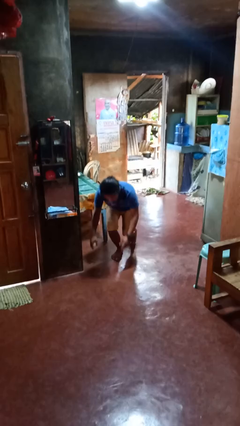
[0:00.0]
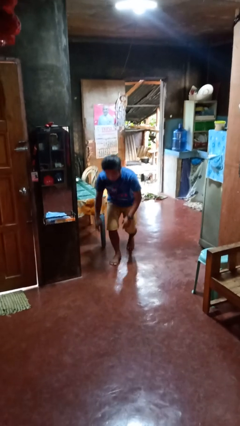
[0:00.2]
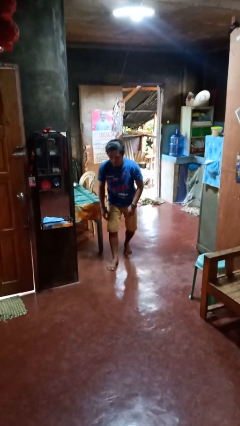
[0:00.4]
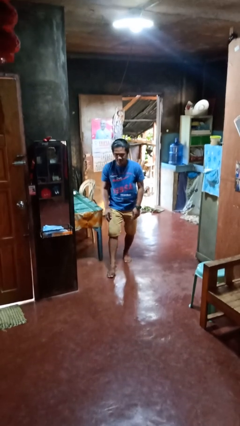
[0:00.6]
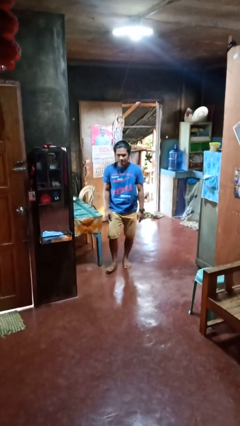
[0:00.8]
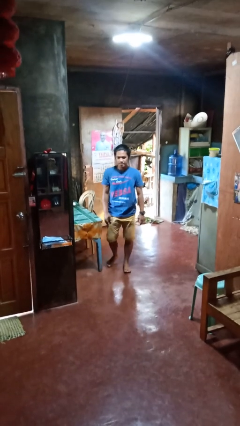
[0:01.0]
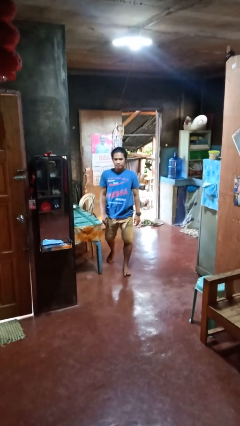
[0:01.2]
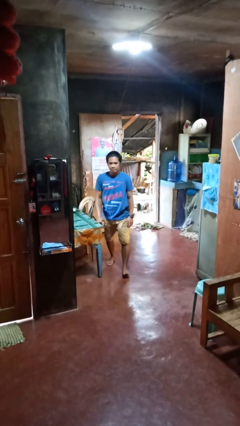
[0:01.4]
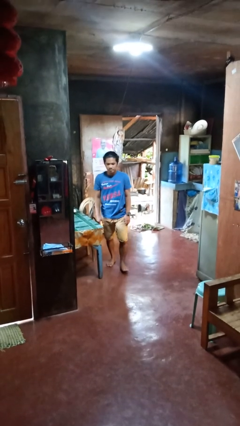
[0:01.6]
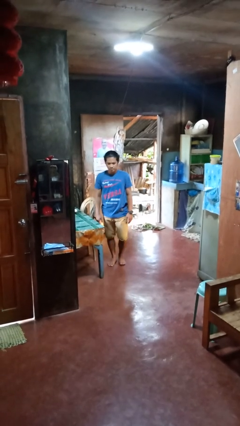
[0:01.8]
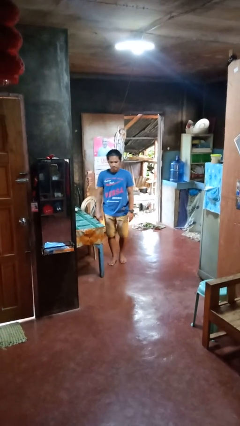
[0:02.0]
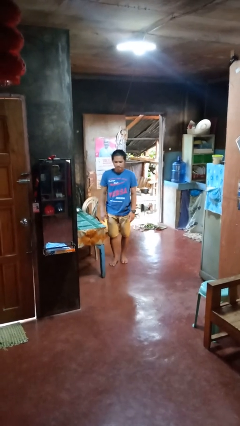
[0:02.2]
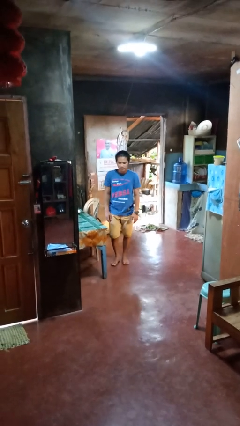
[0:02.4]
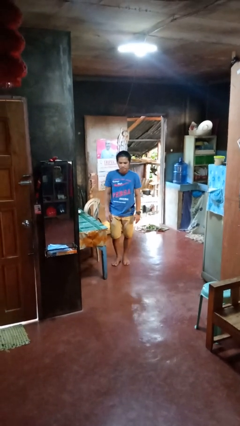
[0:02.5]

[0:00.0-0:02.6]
person stands up from floor

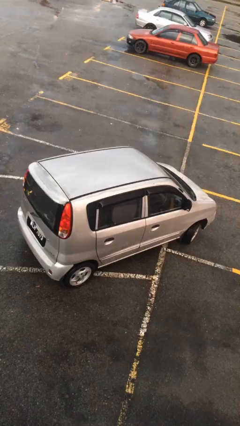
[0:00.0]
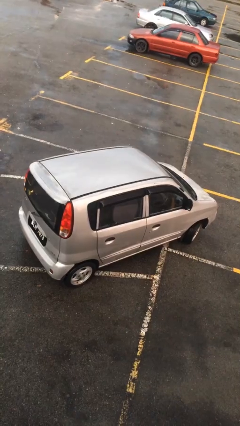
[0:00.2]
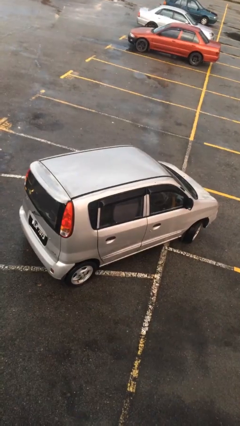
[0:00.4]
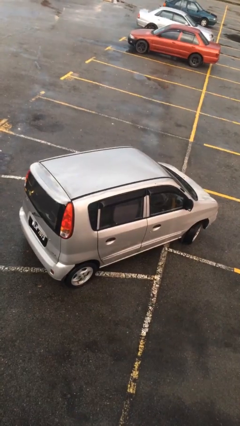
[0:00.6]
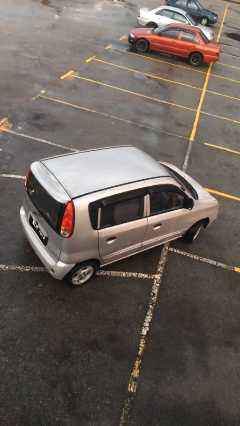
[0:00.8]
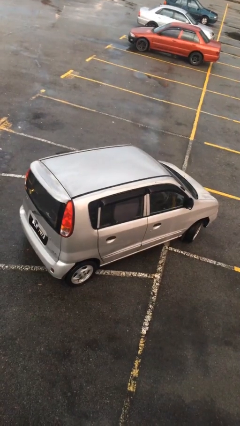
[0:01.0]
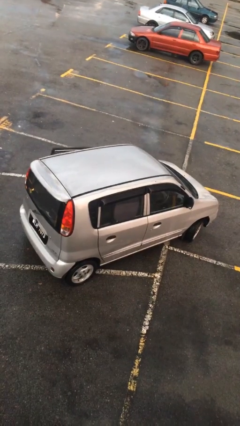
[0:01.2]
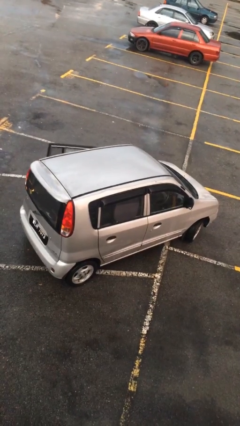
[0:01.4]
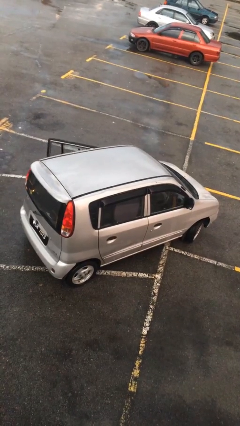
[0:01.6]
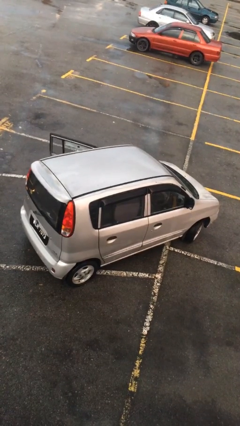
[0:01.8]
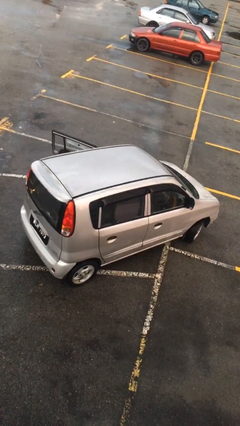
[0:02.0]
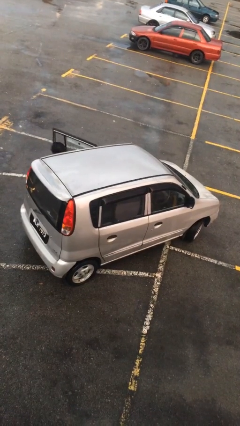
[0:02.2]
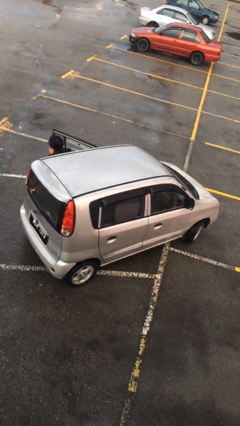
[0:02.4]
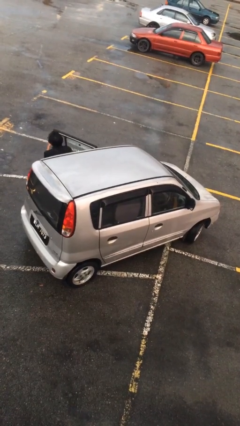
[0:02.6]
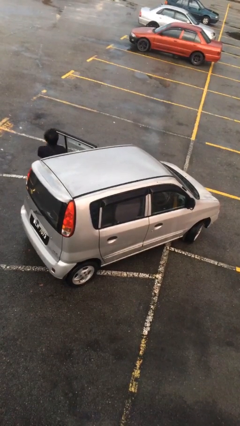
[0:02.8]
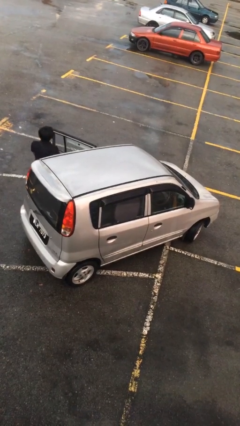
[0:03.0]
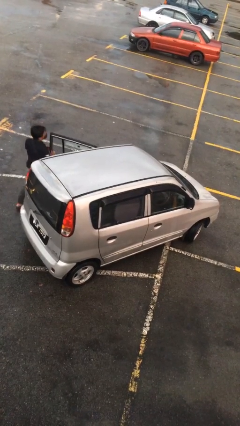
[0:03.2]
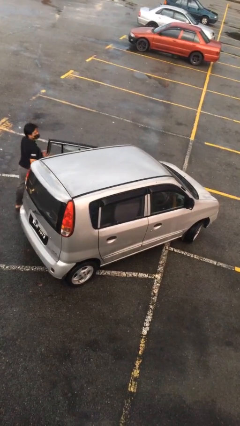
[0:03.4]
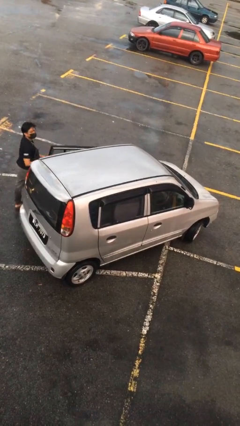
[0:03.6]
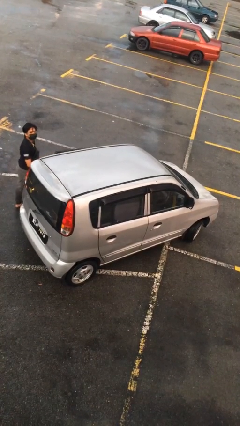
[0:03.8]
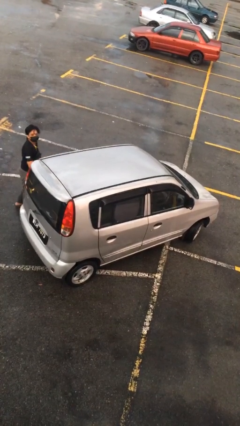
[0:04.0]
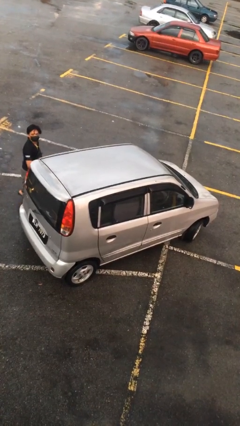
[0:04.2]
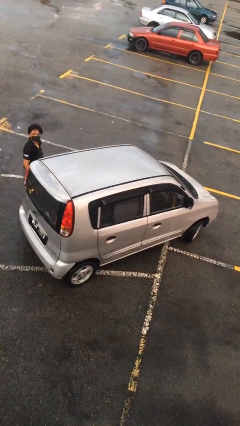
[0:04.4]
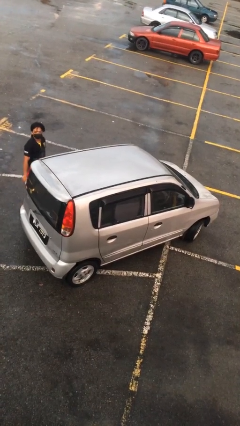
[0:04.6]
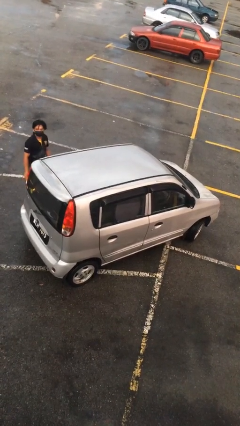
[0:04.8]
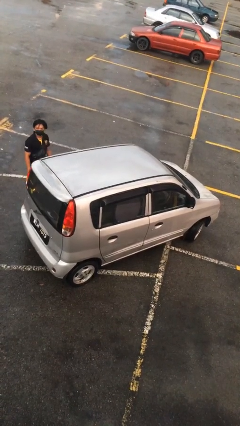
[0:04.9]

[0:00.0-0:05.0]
car drops off person

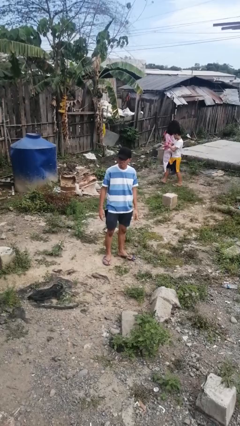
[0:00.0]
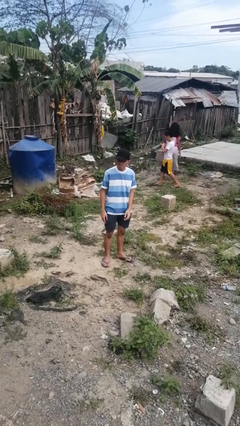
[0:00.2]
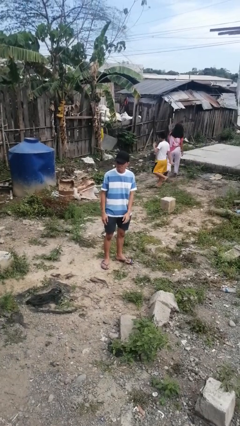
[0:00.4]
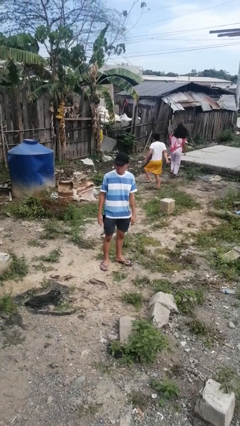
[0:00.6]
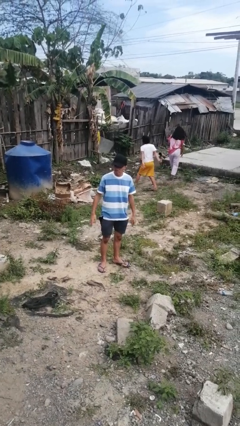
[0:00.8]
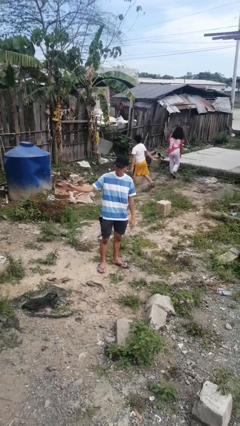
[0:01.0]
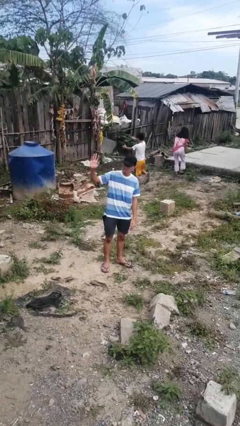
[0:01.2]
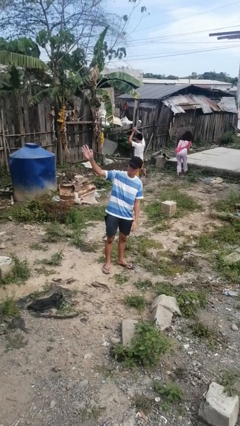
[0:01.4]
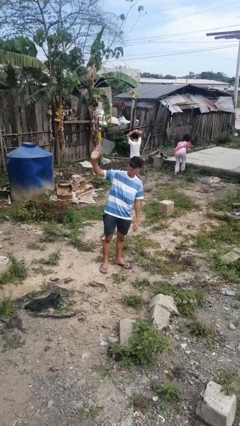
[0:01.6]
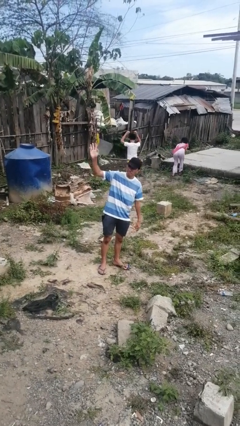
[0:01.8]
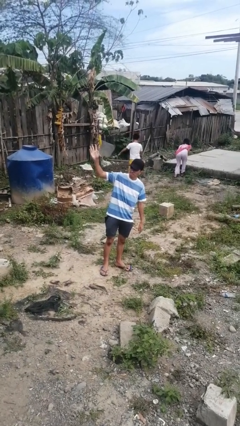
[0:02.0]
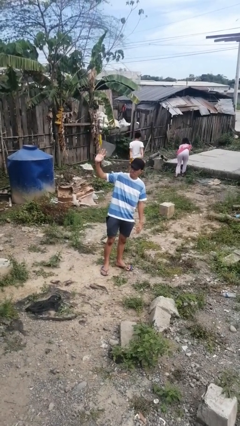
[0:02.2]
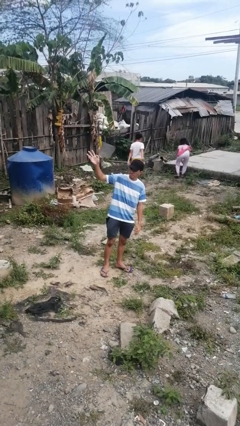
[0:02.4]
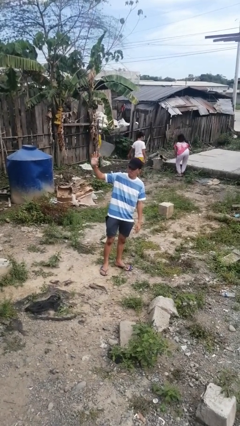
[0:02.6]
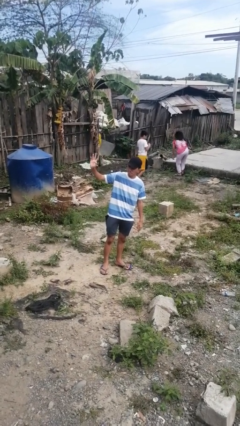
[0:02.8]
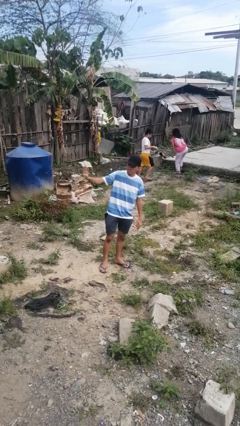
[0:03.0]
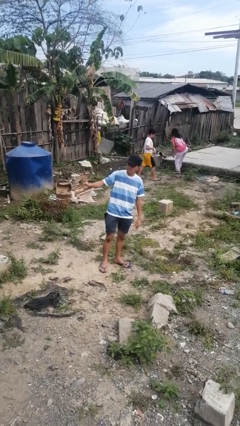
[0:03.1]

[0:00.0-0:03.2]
person waves at person

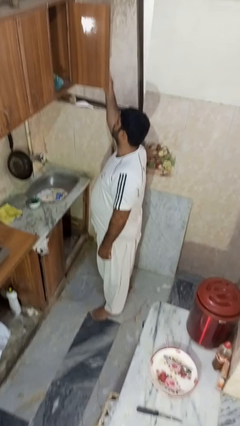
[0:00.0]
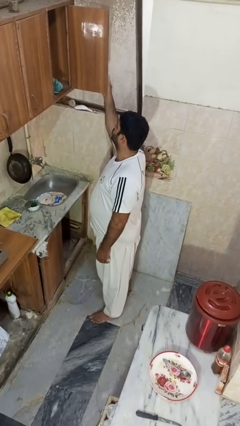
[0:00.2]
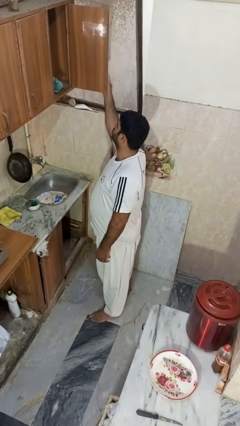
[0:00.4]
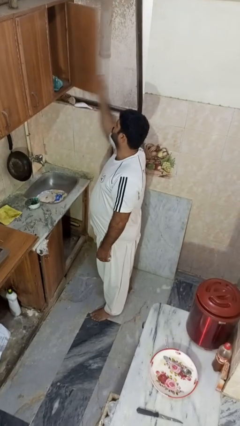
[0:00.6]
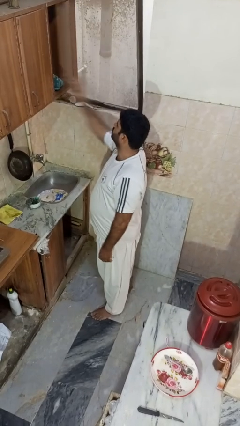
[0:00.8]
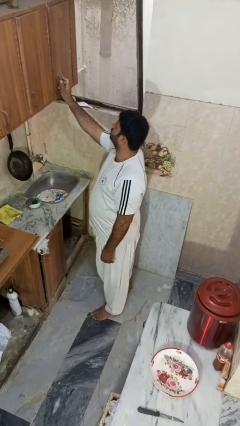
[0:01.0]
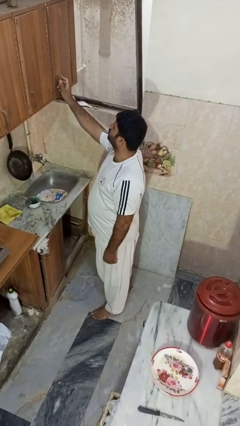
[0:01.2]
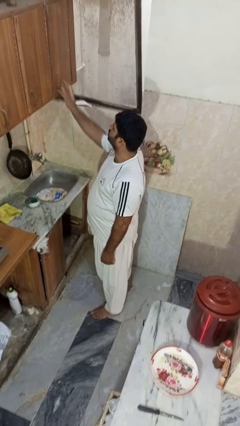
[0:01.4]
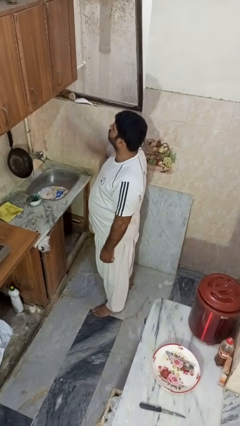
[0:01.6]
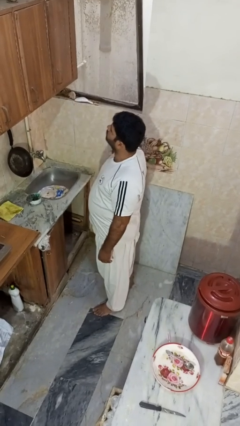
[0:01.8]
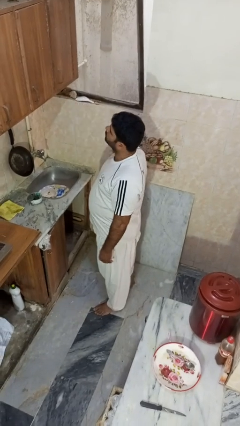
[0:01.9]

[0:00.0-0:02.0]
person closes cabinet

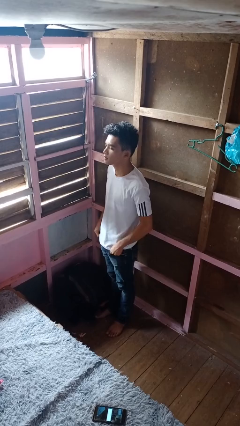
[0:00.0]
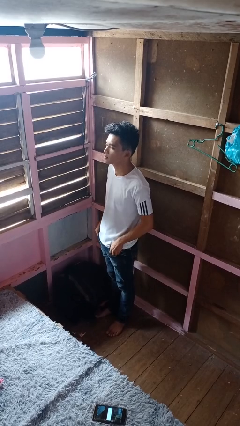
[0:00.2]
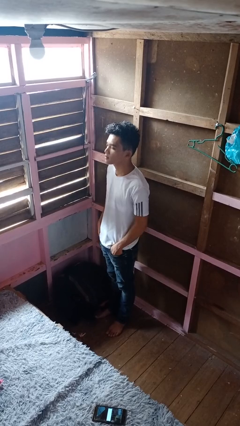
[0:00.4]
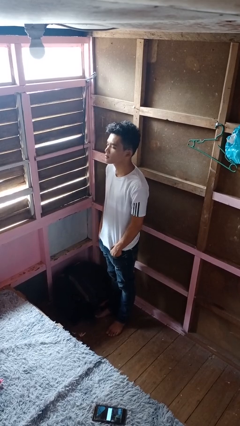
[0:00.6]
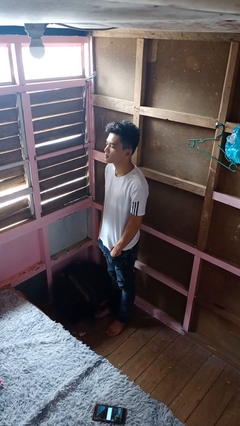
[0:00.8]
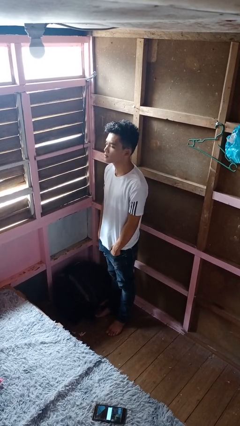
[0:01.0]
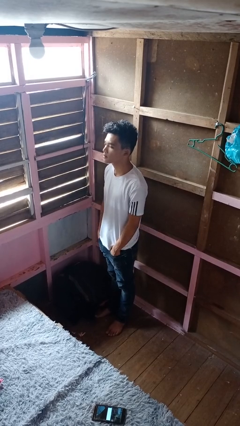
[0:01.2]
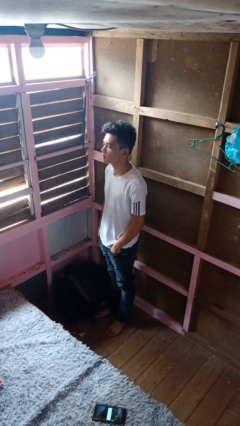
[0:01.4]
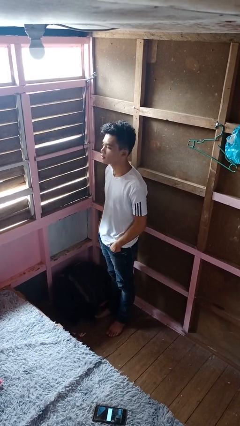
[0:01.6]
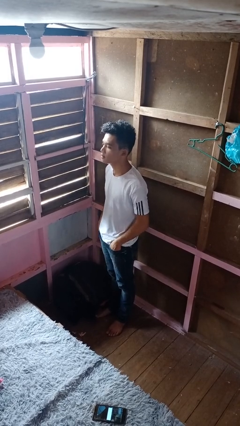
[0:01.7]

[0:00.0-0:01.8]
person puts hands in back pockets

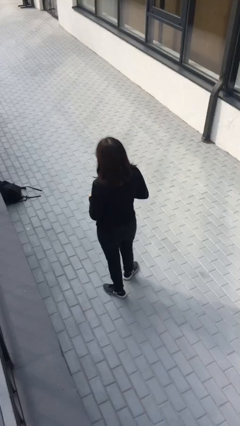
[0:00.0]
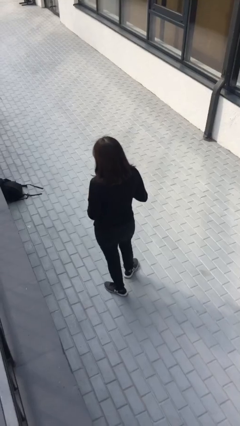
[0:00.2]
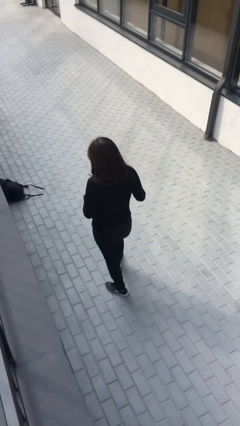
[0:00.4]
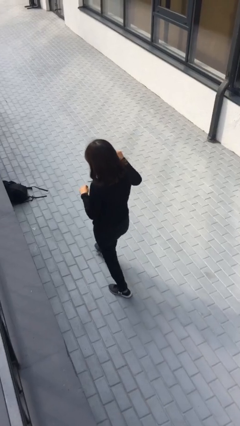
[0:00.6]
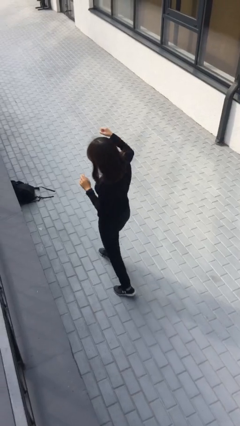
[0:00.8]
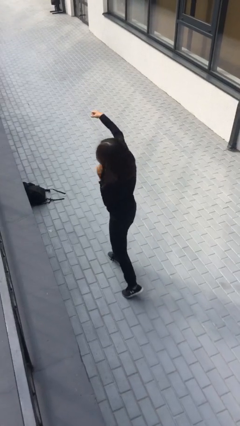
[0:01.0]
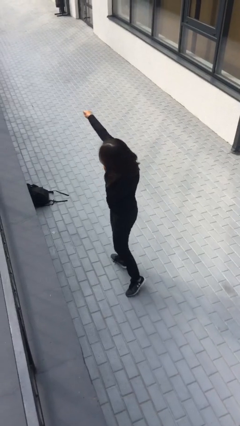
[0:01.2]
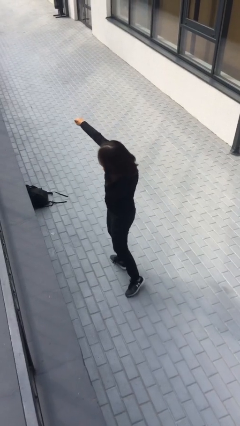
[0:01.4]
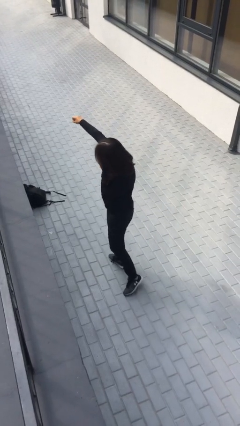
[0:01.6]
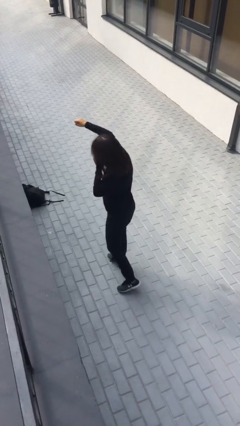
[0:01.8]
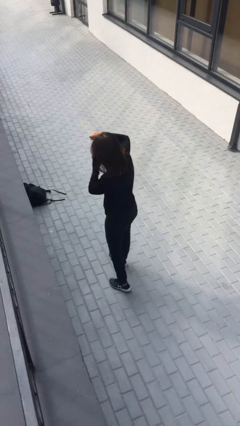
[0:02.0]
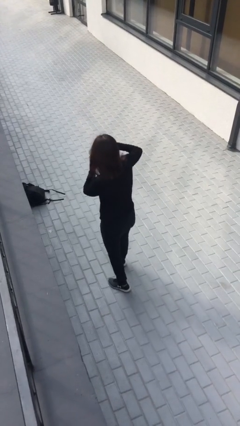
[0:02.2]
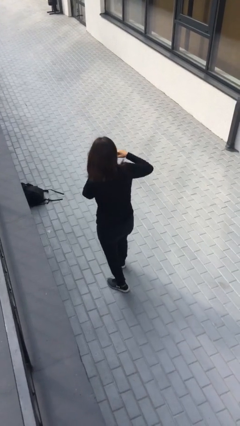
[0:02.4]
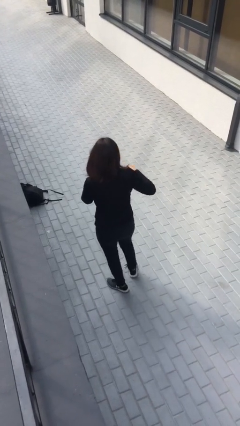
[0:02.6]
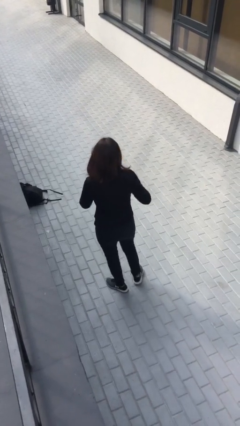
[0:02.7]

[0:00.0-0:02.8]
person punches
